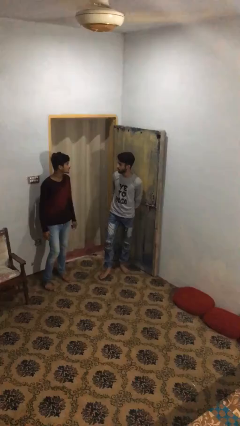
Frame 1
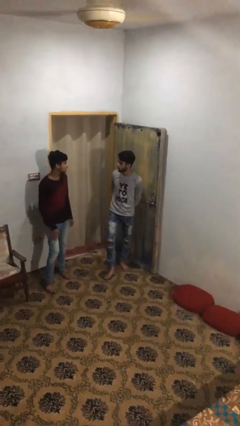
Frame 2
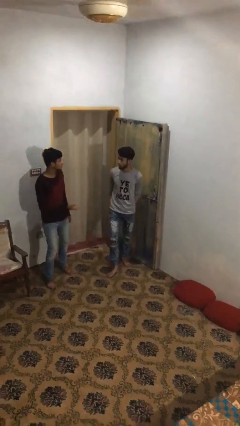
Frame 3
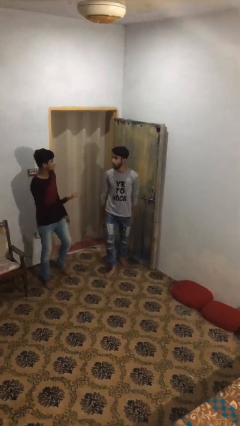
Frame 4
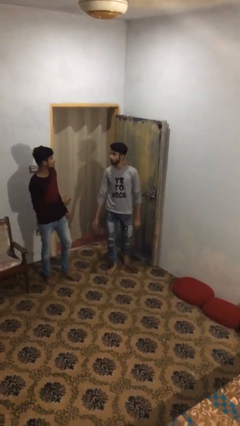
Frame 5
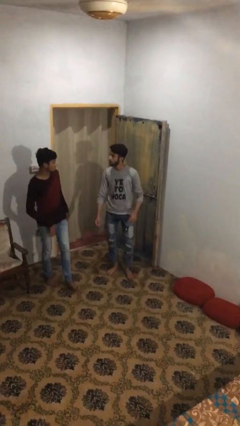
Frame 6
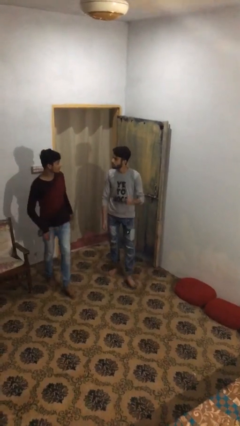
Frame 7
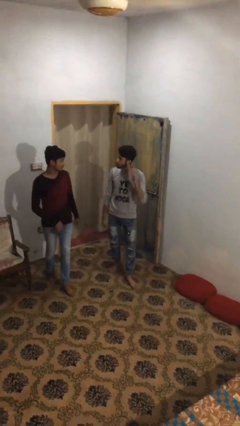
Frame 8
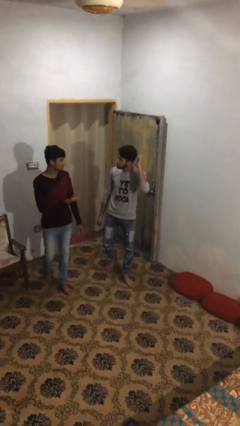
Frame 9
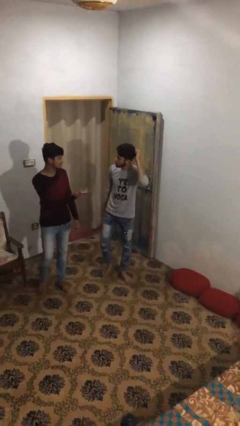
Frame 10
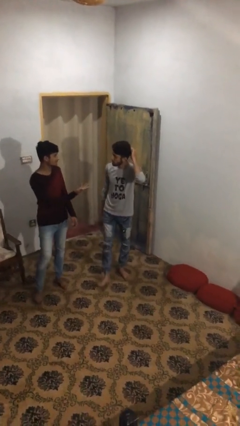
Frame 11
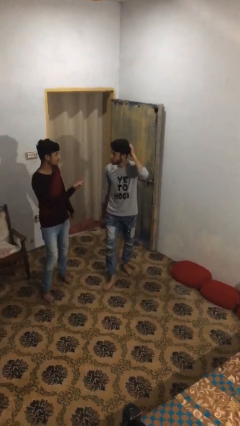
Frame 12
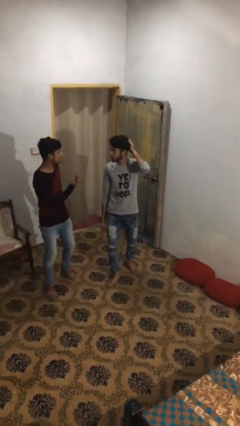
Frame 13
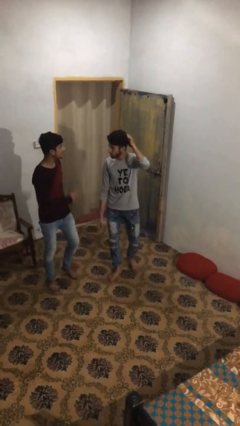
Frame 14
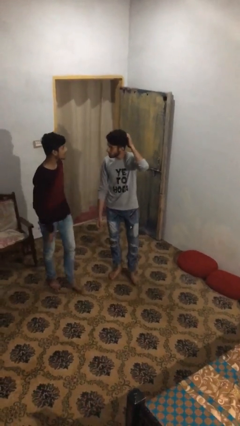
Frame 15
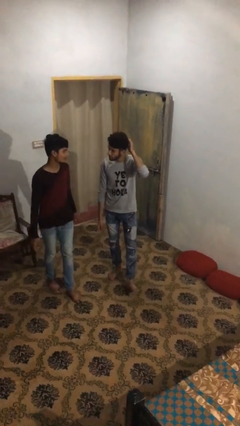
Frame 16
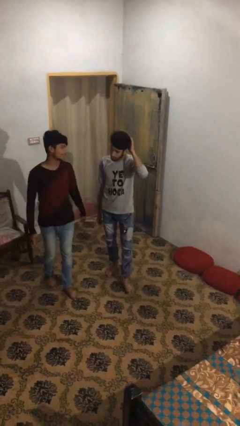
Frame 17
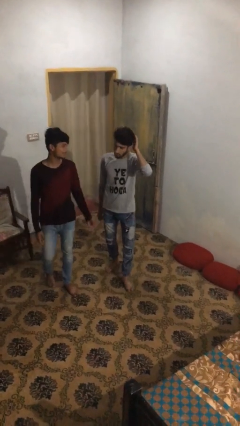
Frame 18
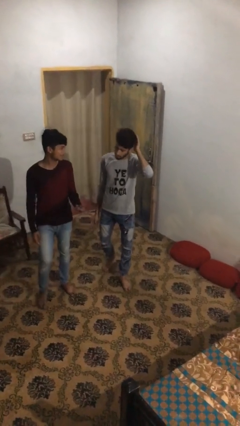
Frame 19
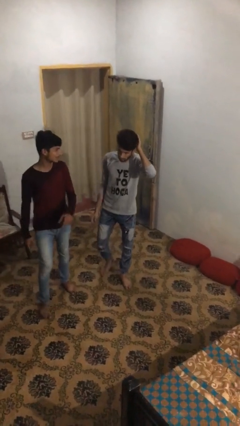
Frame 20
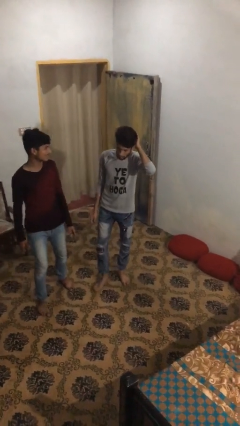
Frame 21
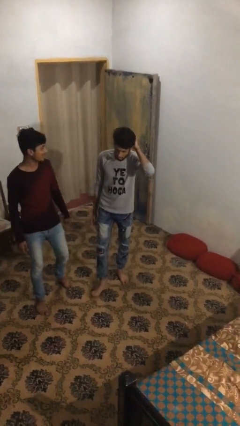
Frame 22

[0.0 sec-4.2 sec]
person talks to person

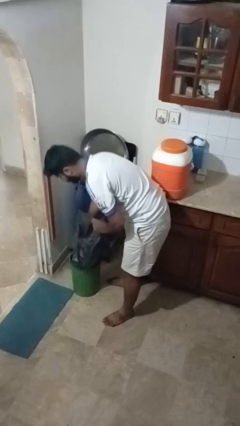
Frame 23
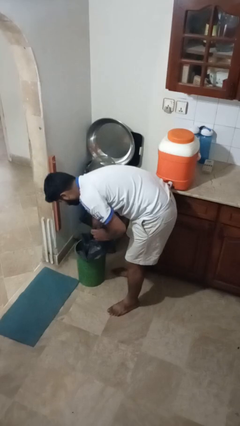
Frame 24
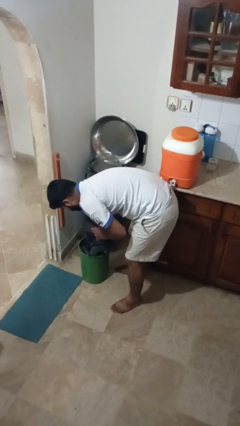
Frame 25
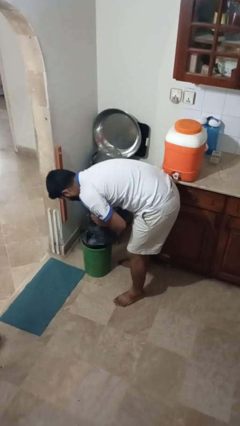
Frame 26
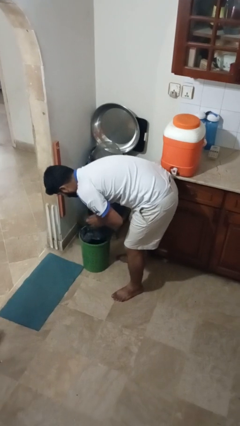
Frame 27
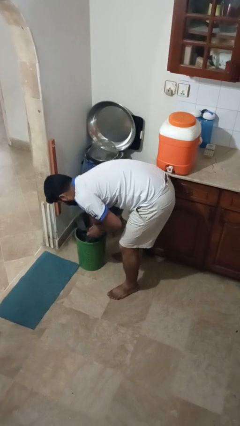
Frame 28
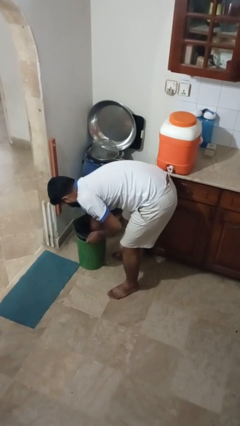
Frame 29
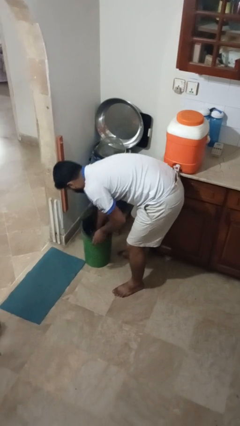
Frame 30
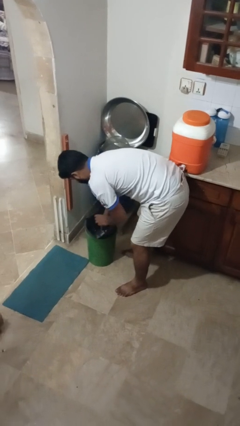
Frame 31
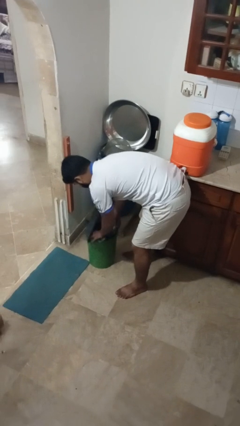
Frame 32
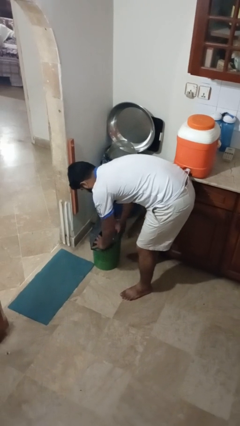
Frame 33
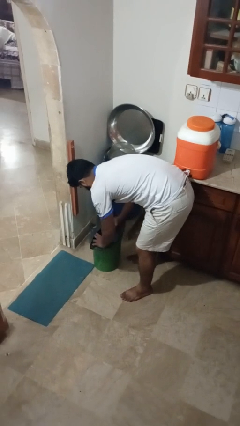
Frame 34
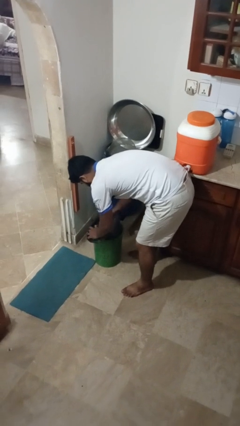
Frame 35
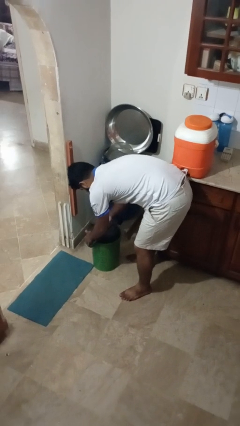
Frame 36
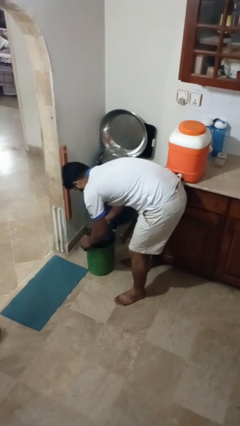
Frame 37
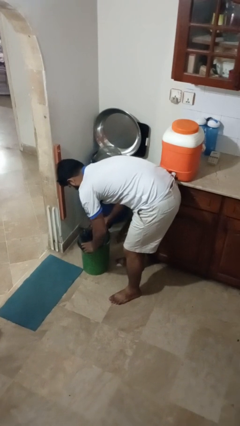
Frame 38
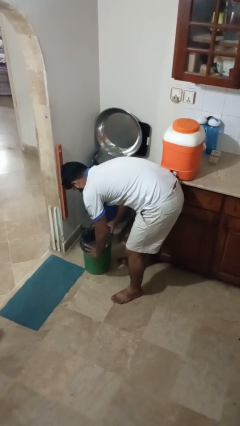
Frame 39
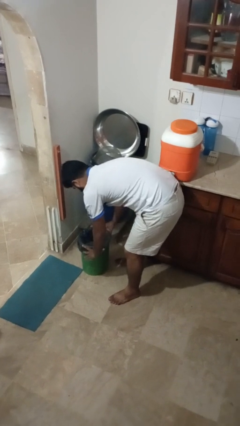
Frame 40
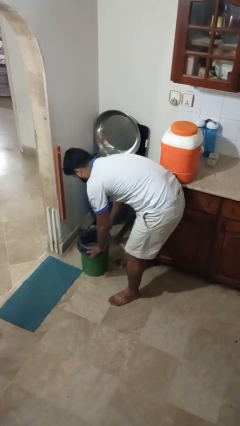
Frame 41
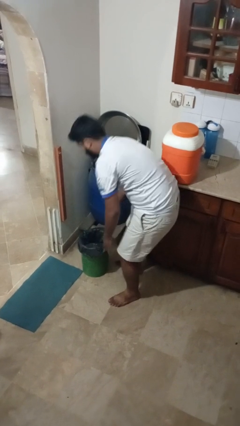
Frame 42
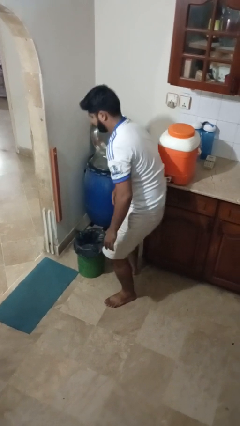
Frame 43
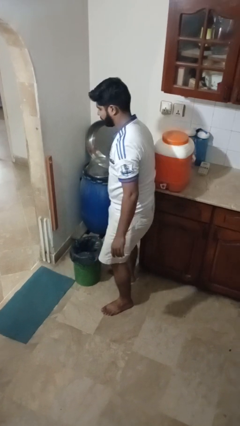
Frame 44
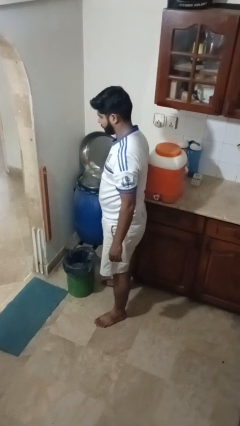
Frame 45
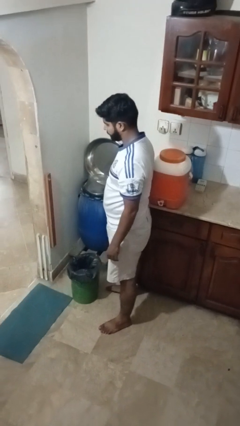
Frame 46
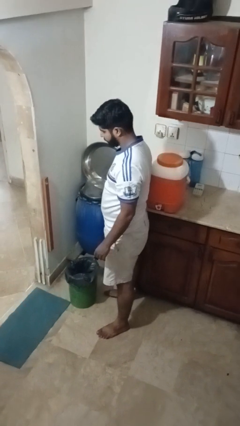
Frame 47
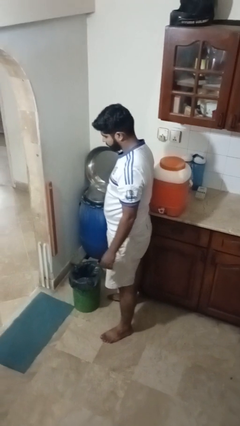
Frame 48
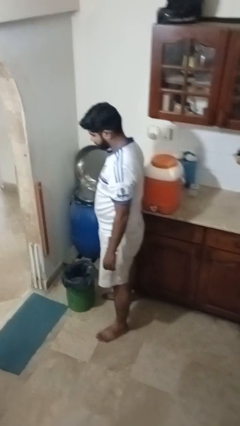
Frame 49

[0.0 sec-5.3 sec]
person inserts trashbag into trashcan

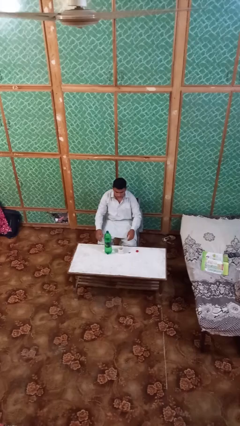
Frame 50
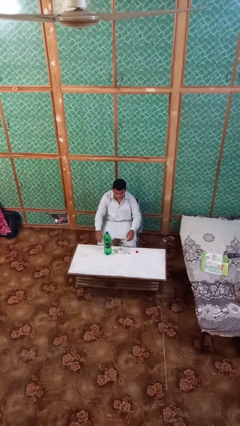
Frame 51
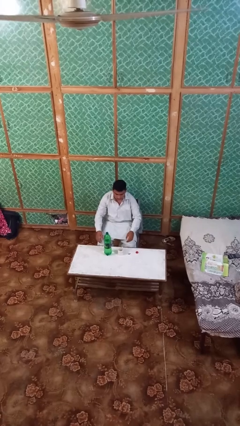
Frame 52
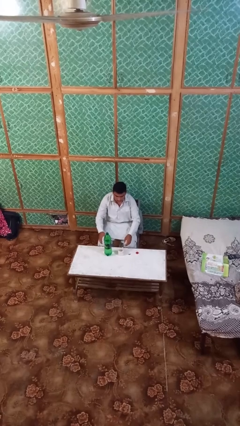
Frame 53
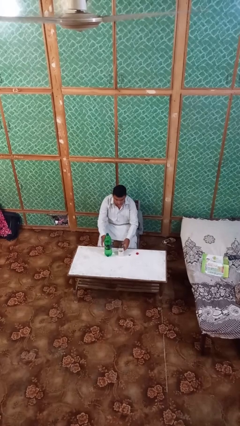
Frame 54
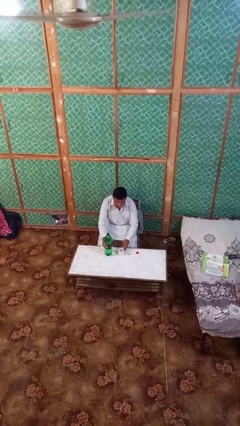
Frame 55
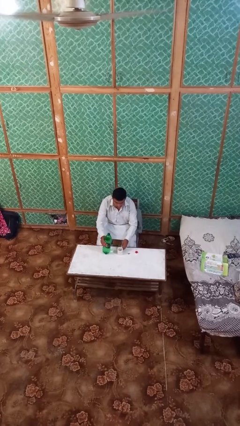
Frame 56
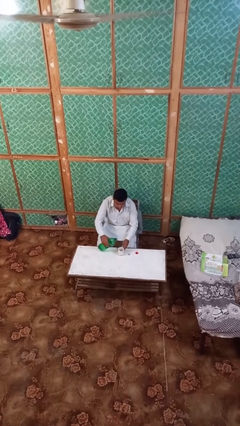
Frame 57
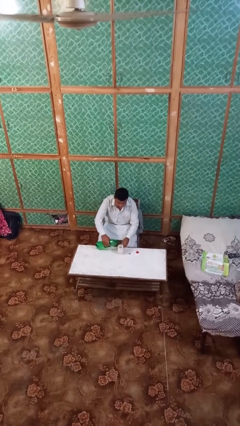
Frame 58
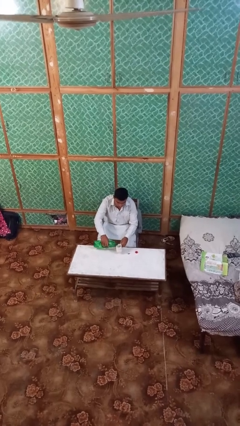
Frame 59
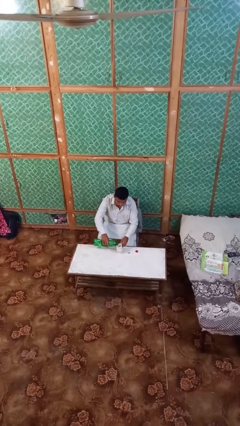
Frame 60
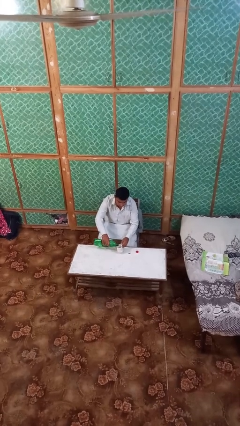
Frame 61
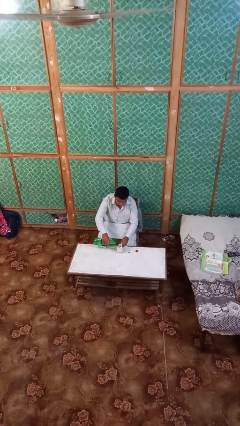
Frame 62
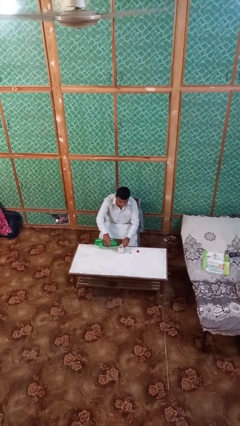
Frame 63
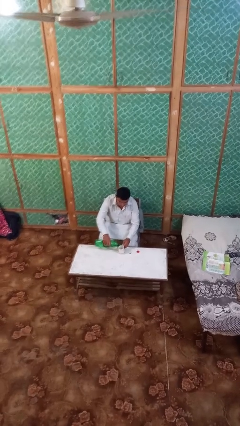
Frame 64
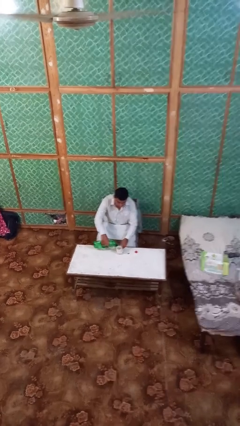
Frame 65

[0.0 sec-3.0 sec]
person pours liquid into cup

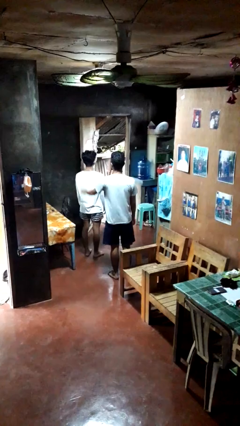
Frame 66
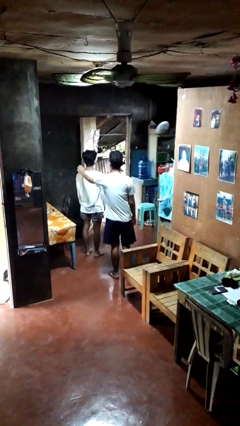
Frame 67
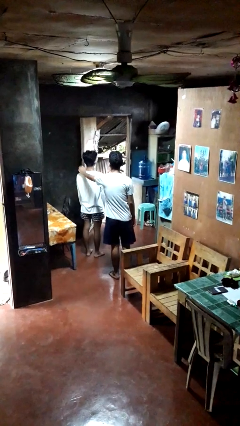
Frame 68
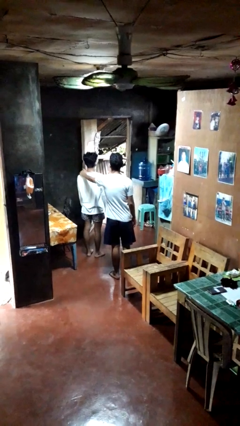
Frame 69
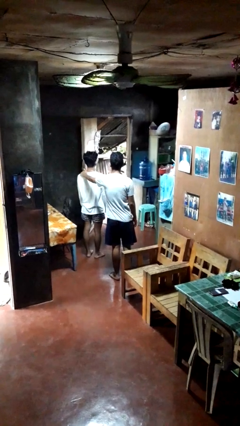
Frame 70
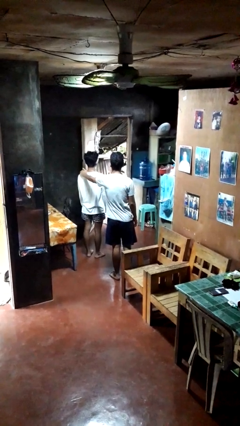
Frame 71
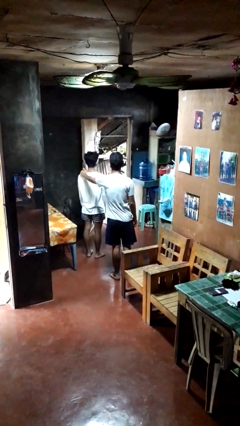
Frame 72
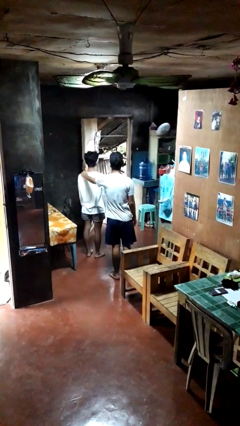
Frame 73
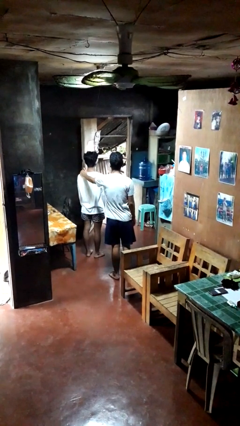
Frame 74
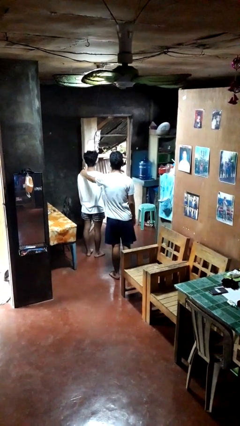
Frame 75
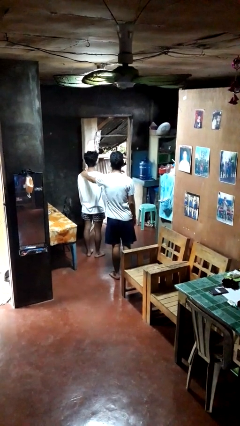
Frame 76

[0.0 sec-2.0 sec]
person pounds shoulders of person

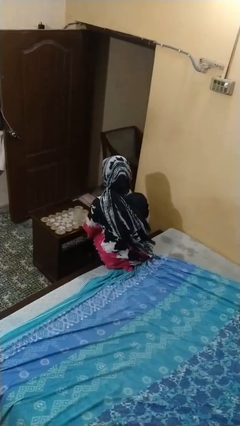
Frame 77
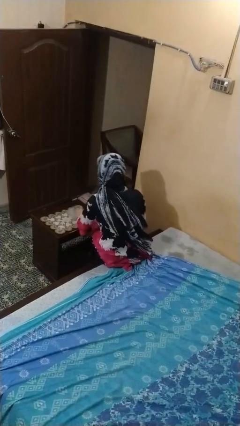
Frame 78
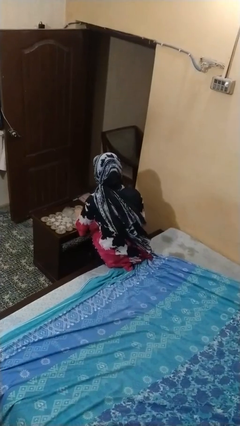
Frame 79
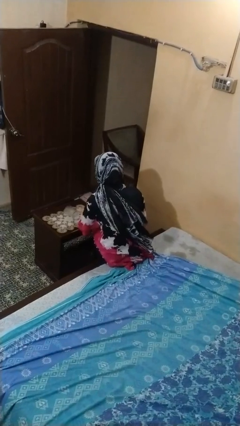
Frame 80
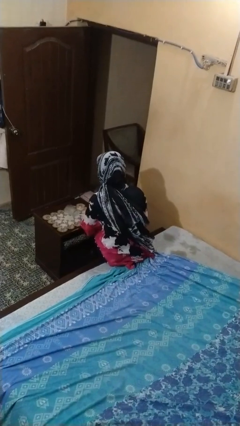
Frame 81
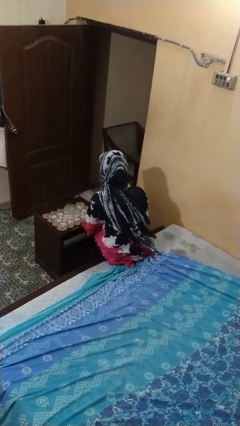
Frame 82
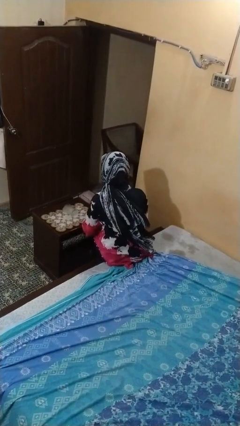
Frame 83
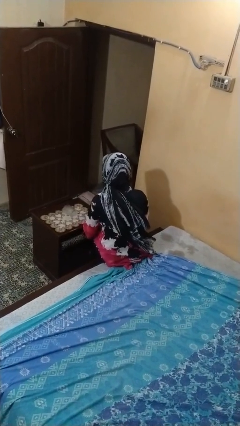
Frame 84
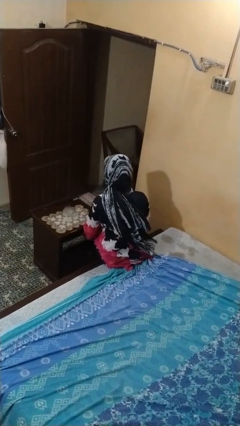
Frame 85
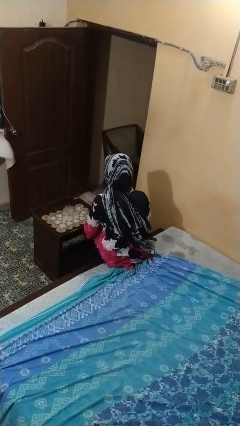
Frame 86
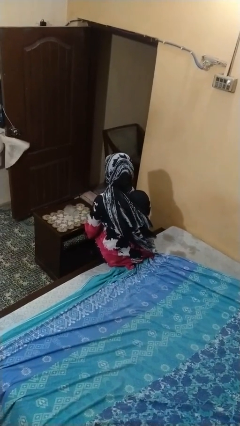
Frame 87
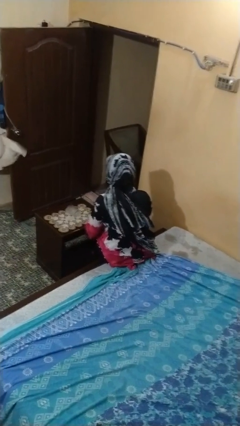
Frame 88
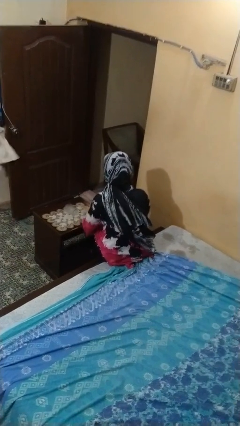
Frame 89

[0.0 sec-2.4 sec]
person knocks over glass

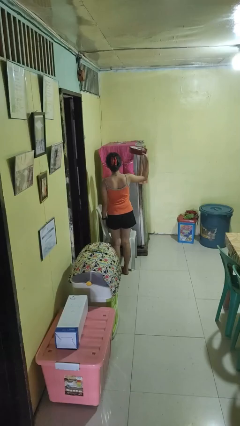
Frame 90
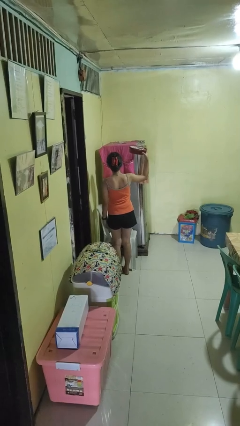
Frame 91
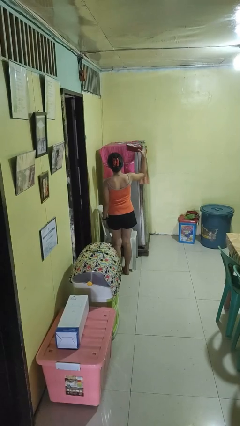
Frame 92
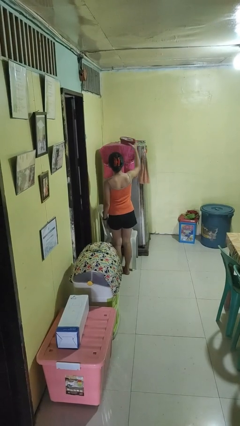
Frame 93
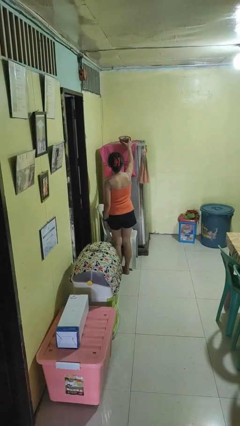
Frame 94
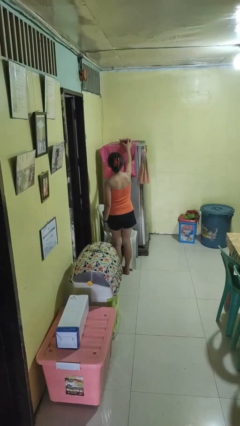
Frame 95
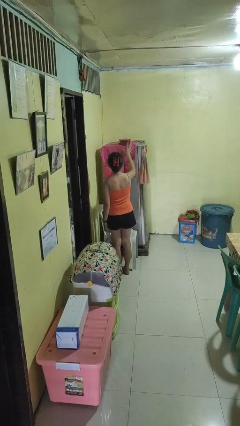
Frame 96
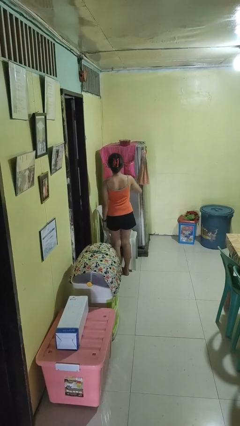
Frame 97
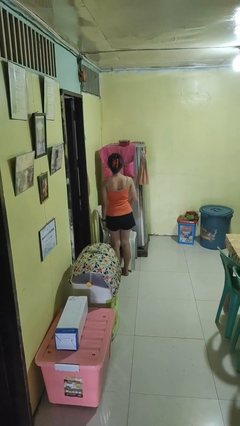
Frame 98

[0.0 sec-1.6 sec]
person puts down object on shelf
